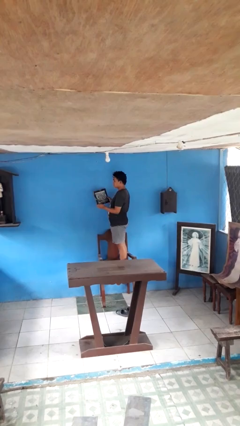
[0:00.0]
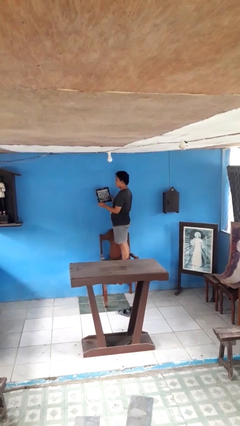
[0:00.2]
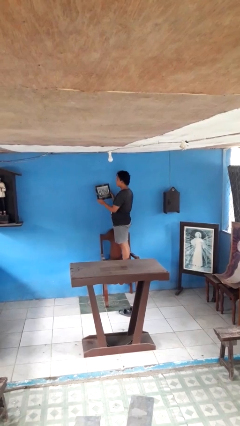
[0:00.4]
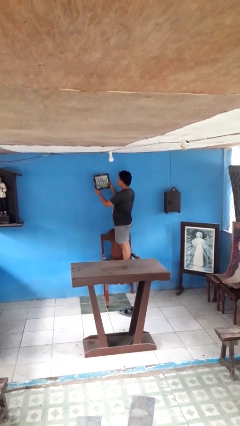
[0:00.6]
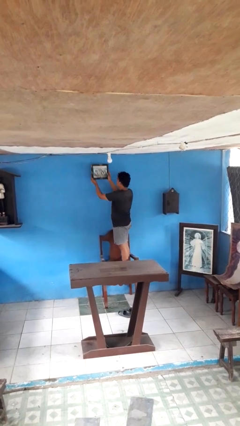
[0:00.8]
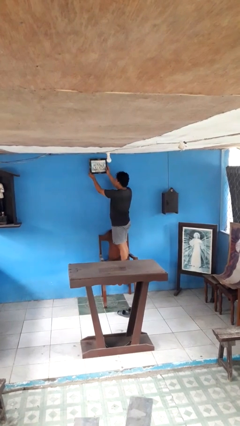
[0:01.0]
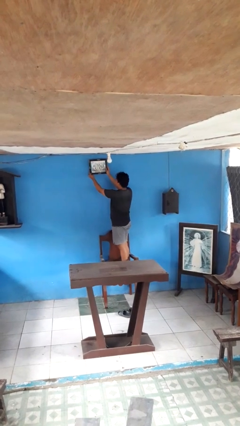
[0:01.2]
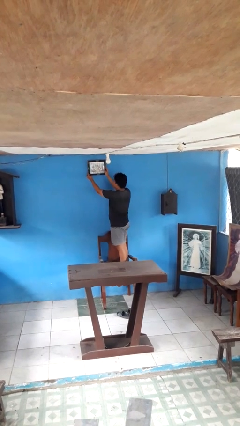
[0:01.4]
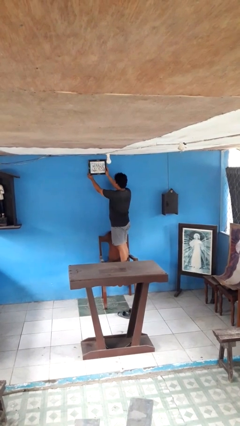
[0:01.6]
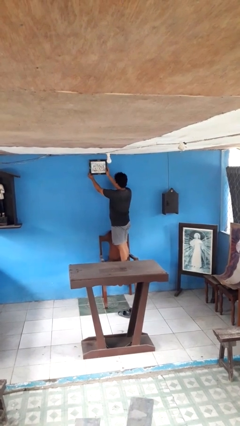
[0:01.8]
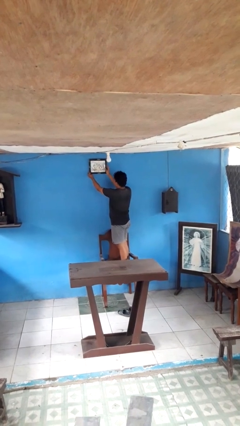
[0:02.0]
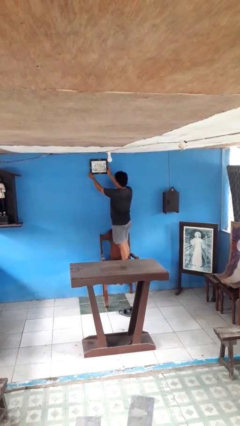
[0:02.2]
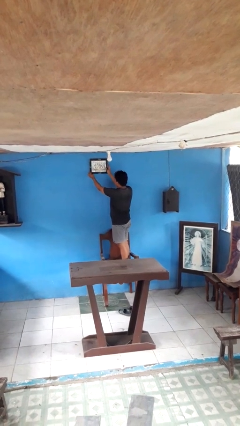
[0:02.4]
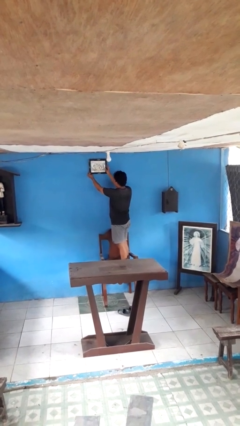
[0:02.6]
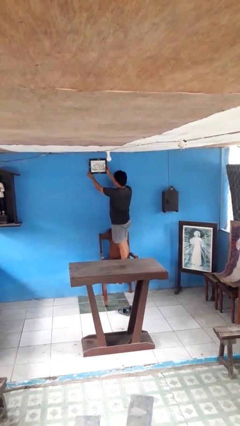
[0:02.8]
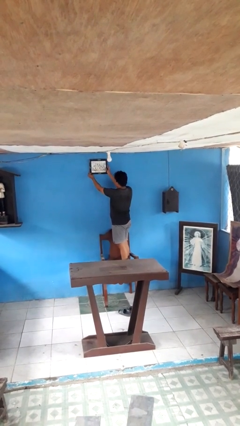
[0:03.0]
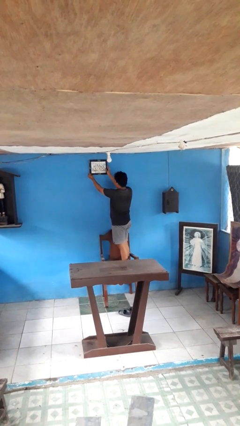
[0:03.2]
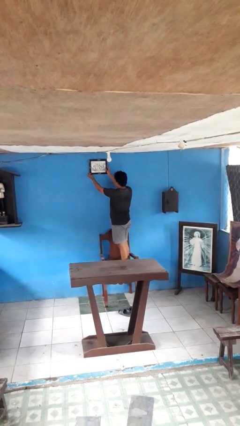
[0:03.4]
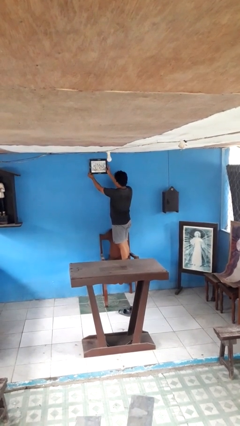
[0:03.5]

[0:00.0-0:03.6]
person puts up picture frame

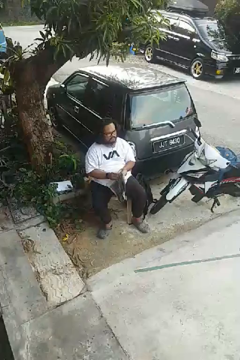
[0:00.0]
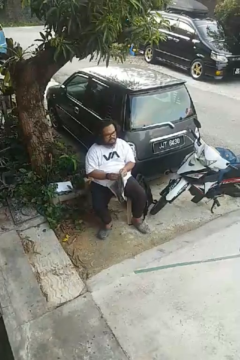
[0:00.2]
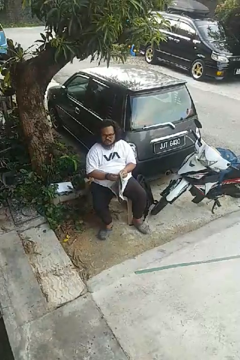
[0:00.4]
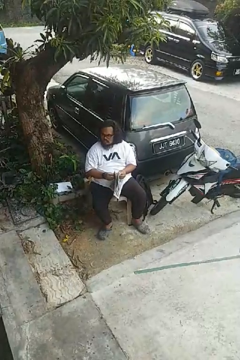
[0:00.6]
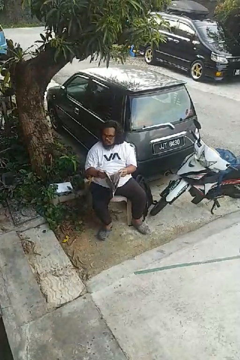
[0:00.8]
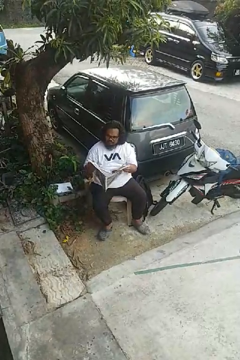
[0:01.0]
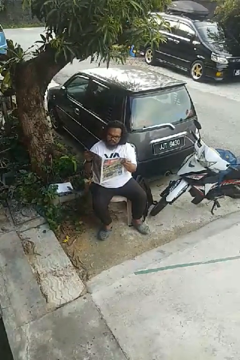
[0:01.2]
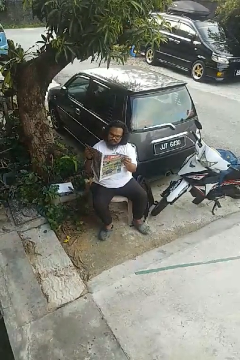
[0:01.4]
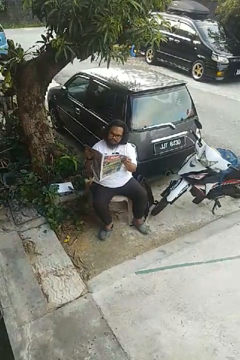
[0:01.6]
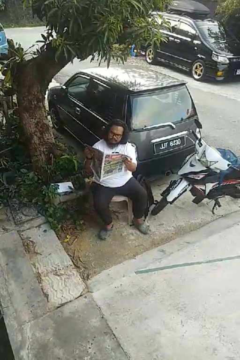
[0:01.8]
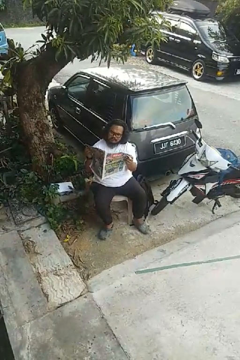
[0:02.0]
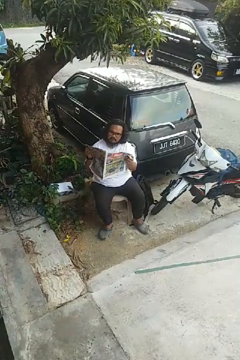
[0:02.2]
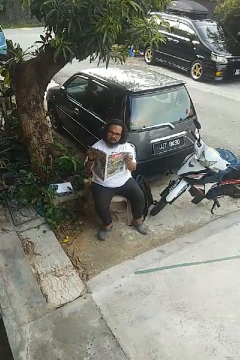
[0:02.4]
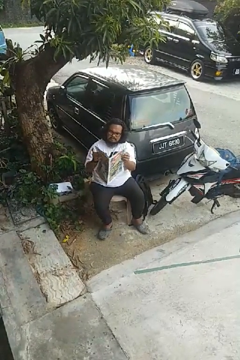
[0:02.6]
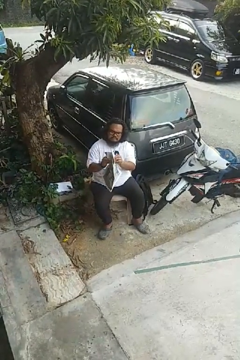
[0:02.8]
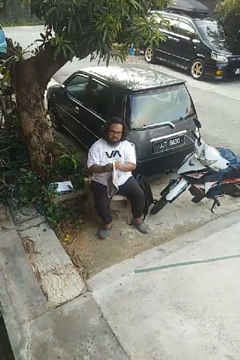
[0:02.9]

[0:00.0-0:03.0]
person reads newspaper

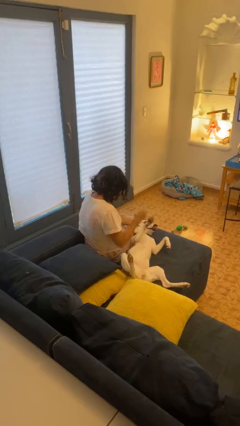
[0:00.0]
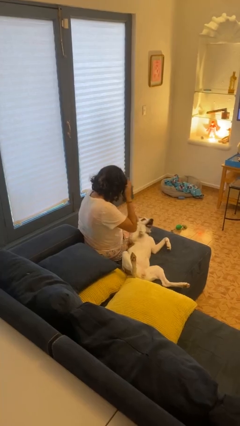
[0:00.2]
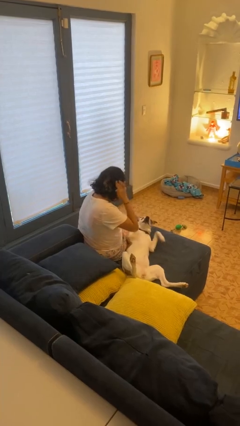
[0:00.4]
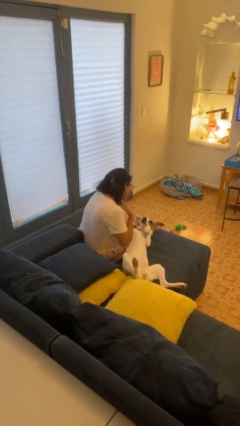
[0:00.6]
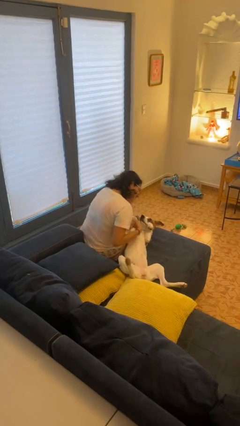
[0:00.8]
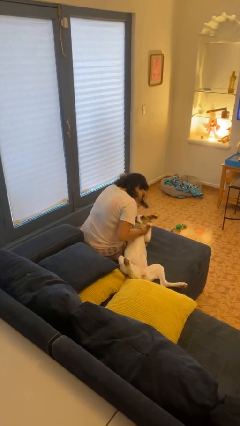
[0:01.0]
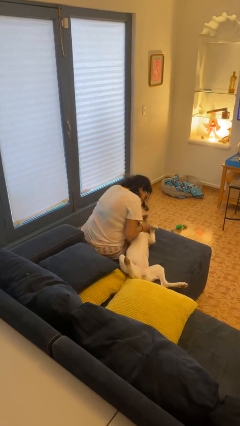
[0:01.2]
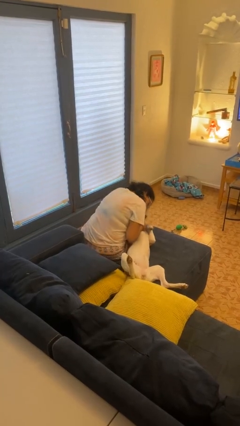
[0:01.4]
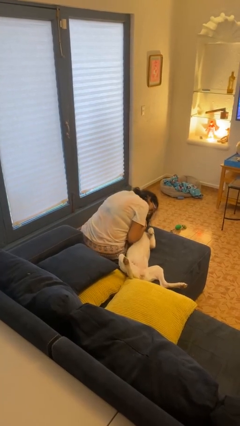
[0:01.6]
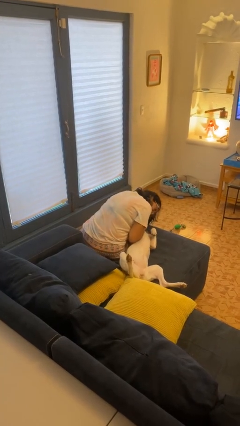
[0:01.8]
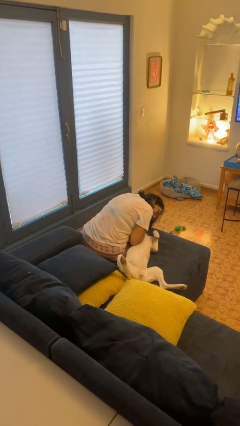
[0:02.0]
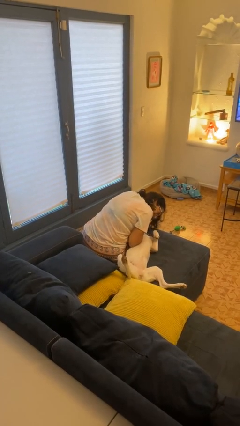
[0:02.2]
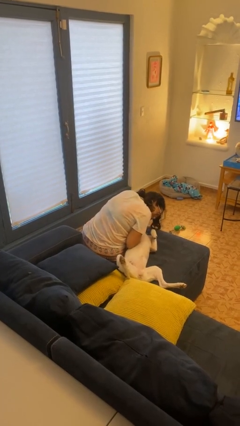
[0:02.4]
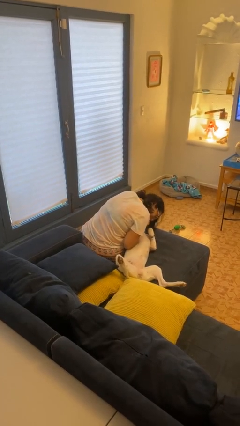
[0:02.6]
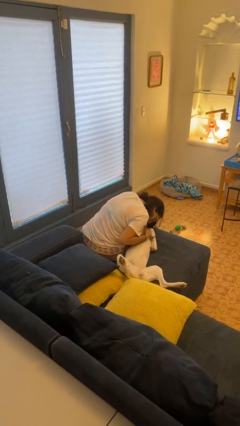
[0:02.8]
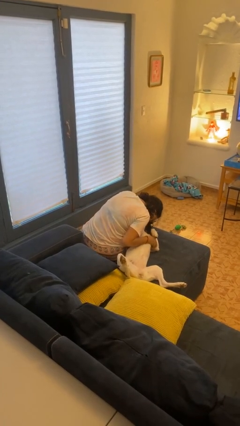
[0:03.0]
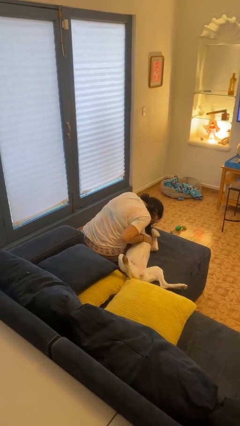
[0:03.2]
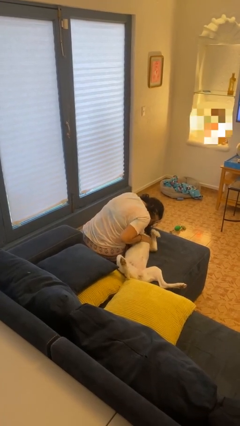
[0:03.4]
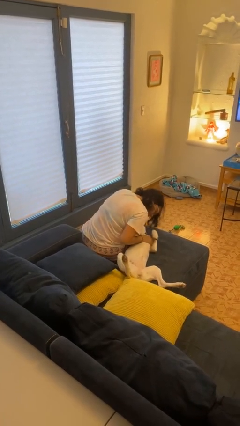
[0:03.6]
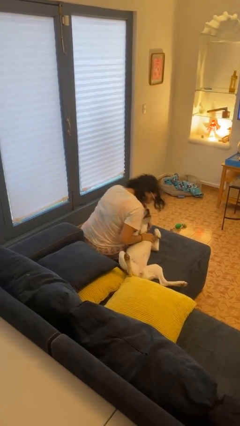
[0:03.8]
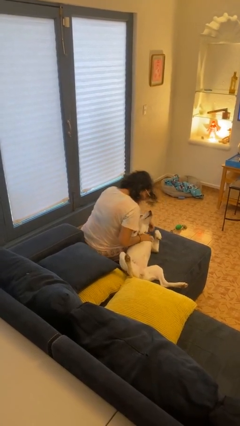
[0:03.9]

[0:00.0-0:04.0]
person hugs dog

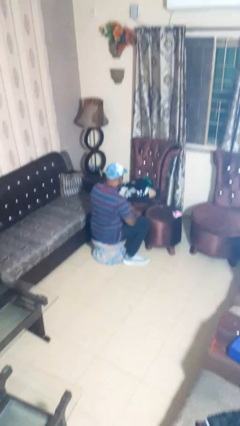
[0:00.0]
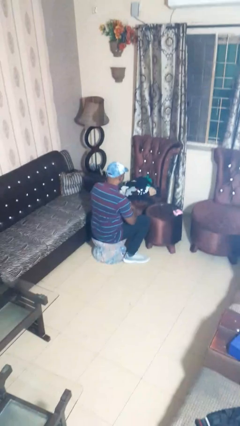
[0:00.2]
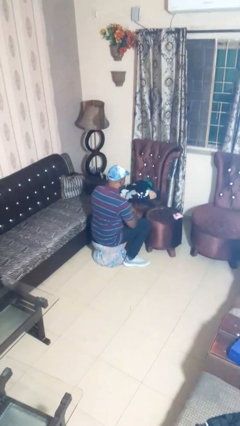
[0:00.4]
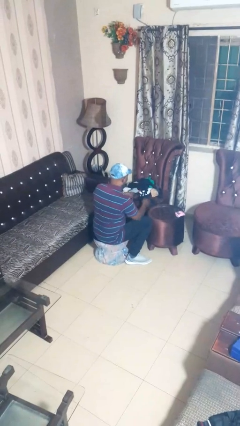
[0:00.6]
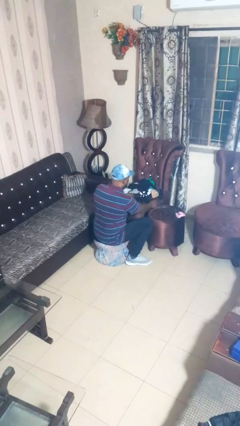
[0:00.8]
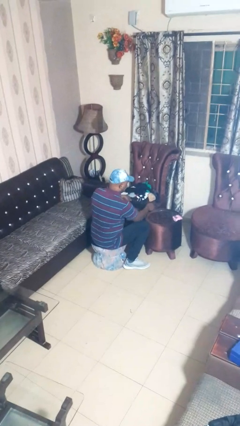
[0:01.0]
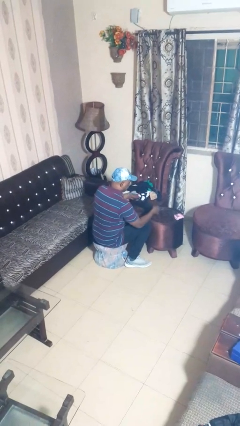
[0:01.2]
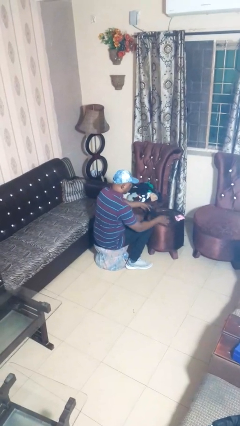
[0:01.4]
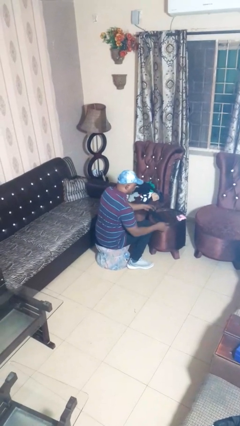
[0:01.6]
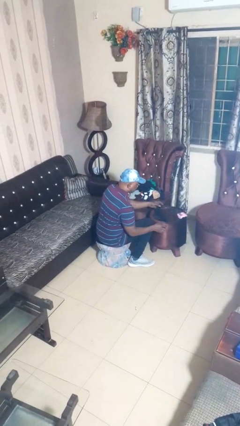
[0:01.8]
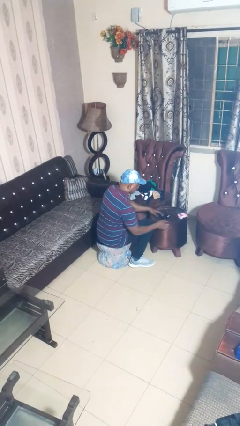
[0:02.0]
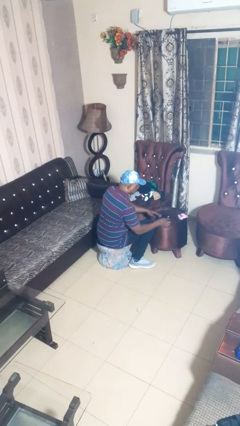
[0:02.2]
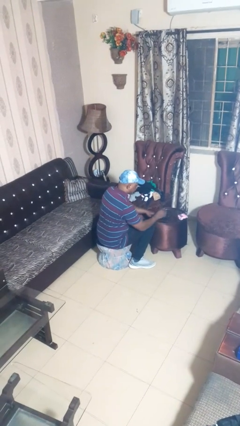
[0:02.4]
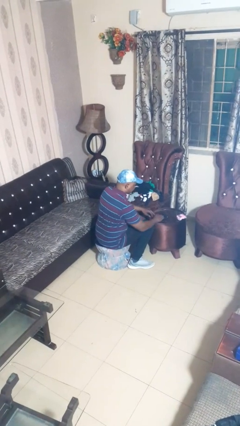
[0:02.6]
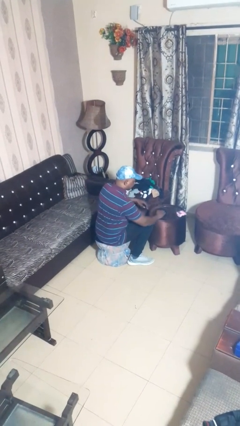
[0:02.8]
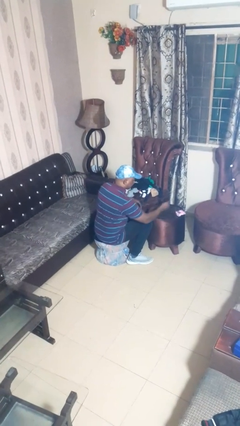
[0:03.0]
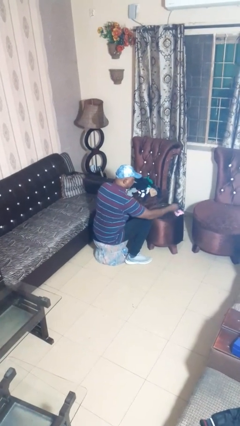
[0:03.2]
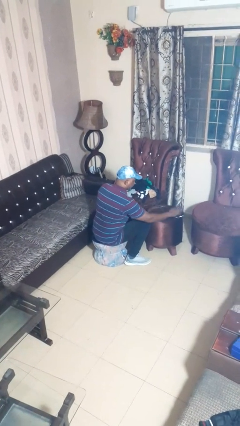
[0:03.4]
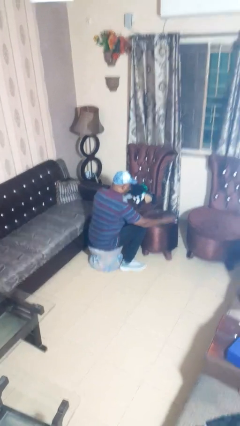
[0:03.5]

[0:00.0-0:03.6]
person folds socks

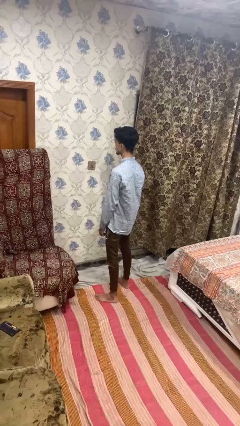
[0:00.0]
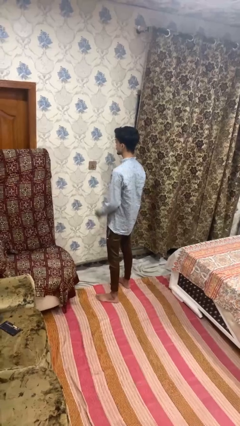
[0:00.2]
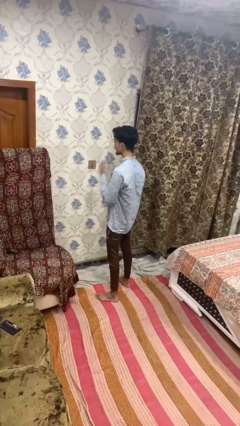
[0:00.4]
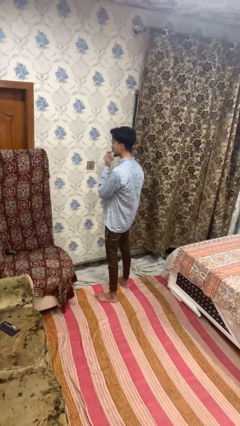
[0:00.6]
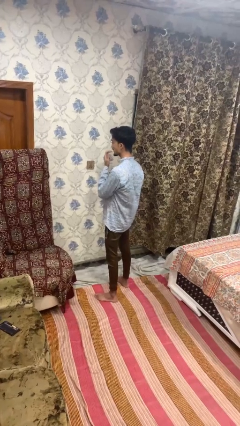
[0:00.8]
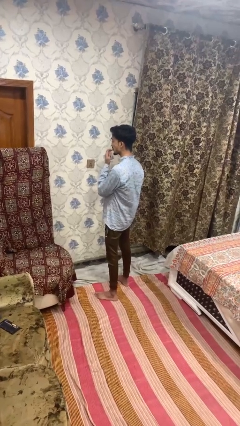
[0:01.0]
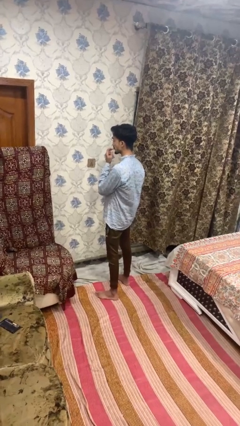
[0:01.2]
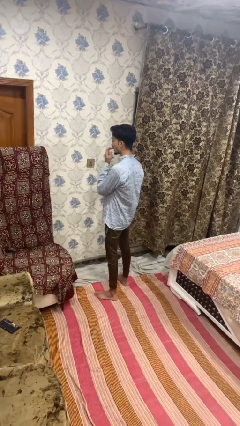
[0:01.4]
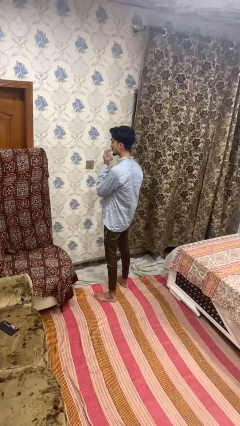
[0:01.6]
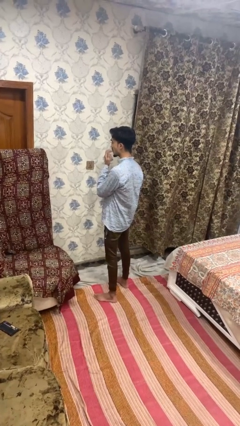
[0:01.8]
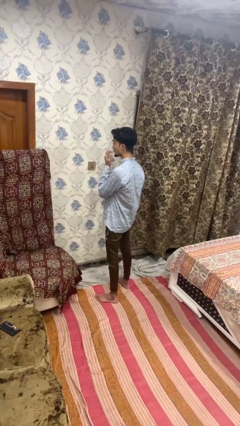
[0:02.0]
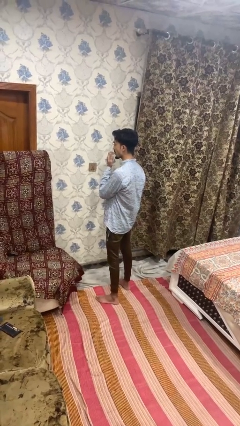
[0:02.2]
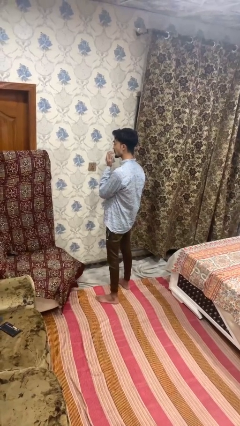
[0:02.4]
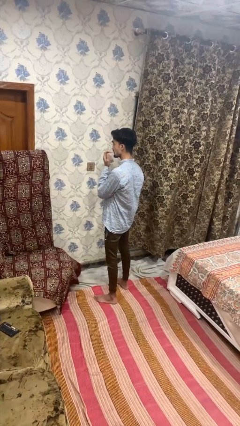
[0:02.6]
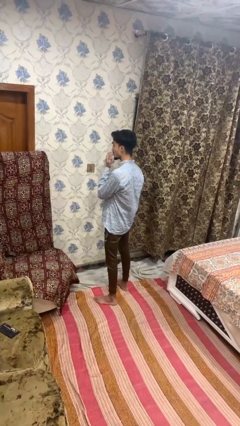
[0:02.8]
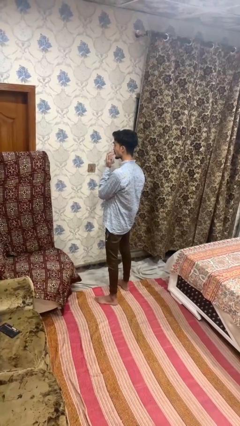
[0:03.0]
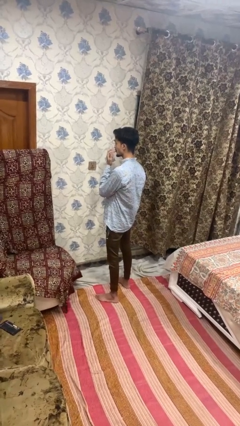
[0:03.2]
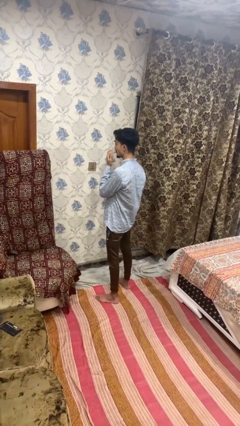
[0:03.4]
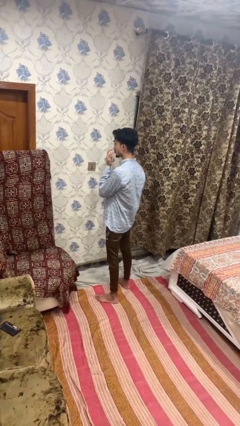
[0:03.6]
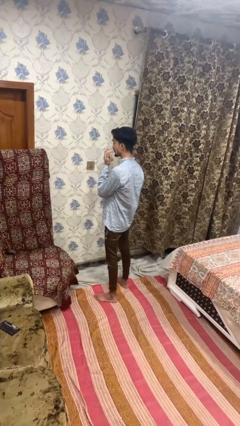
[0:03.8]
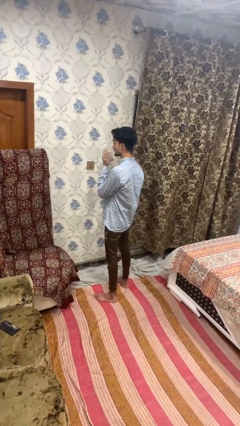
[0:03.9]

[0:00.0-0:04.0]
person licks fingers
